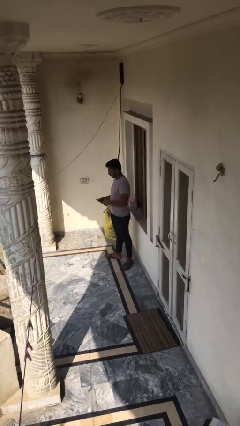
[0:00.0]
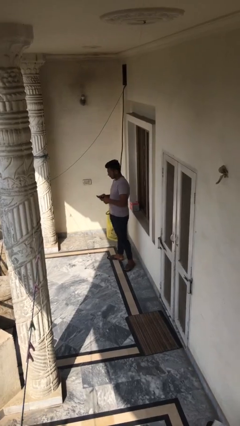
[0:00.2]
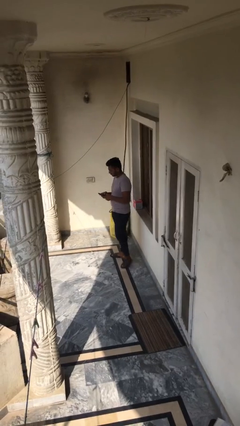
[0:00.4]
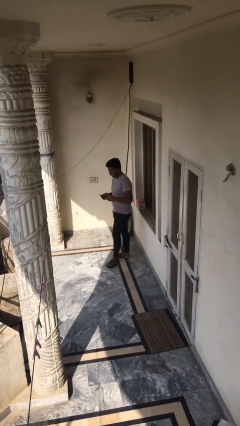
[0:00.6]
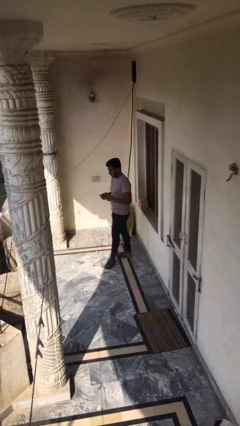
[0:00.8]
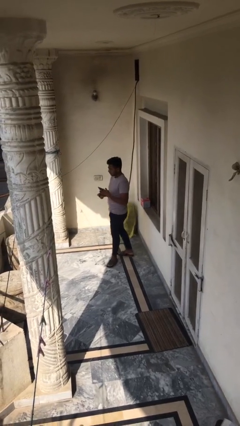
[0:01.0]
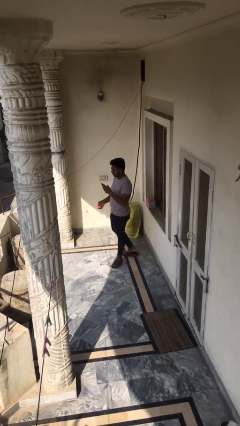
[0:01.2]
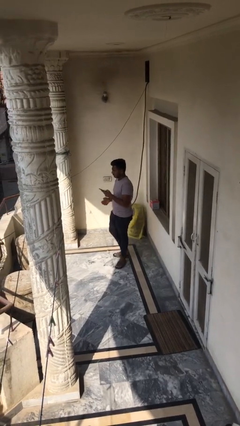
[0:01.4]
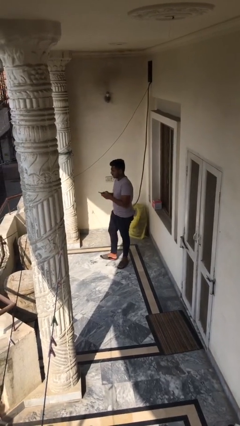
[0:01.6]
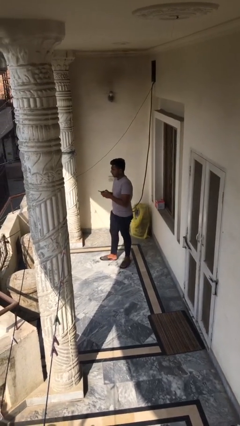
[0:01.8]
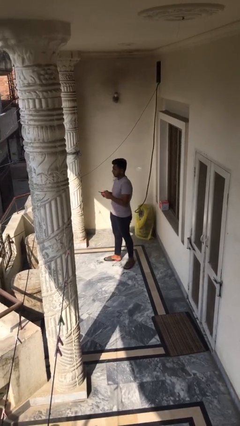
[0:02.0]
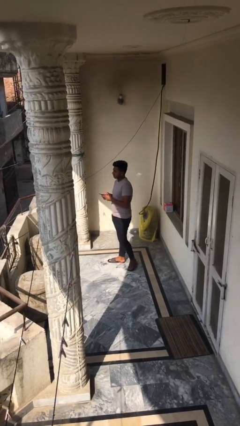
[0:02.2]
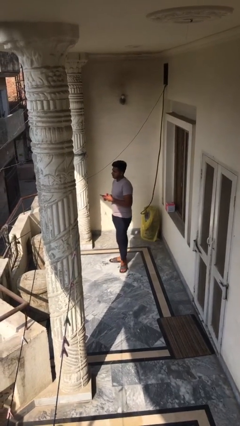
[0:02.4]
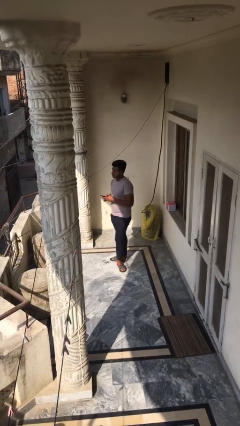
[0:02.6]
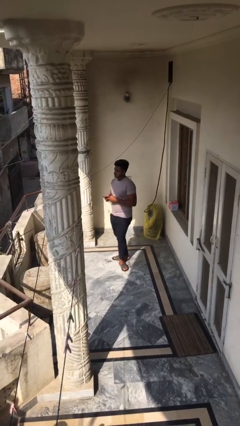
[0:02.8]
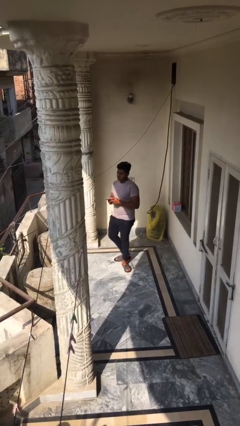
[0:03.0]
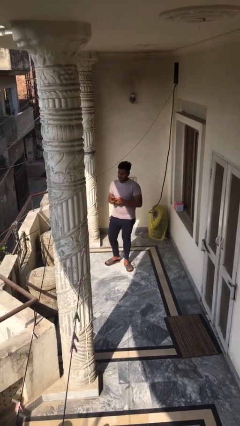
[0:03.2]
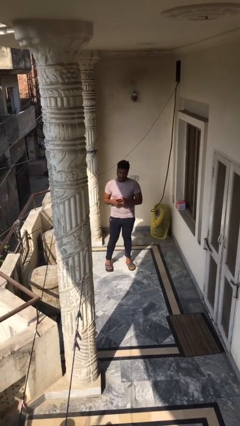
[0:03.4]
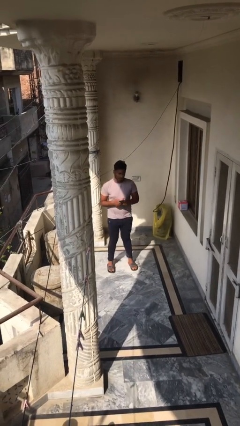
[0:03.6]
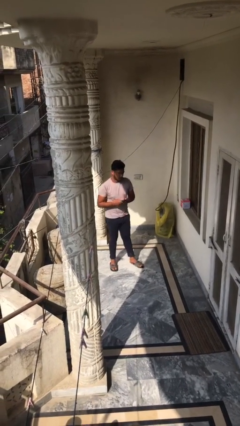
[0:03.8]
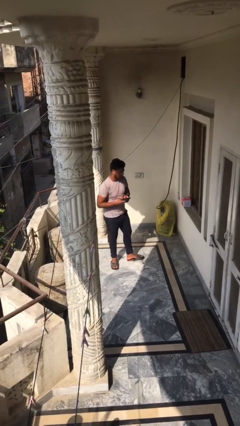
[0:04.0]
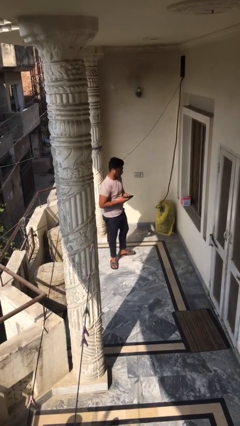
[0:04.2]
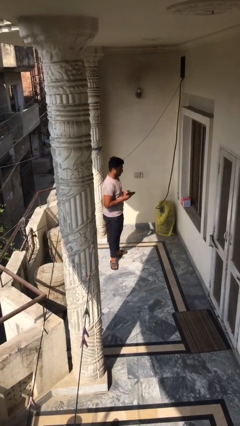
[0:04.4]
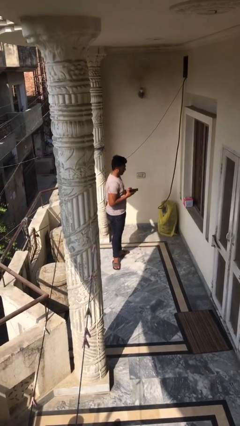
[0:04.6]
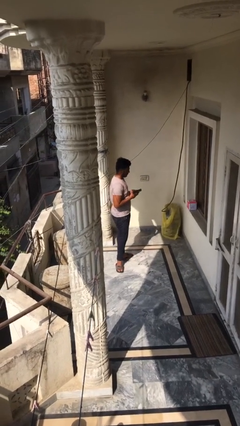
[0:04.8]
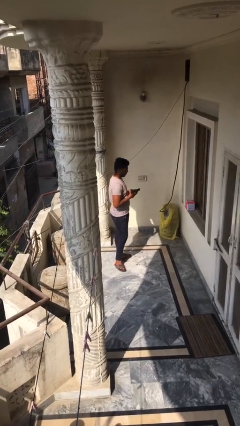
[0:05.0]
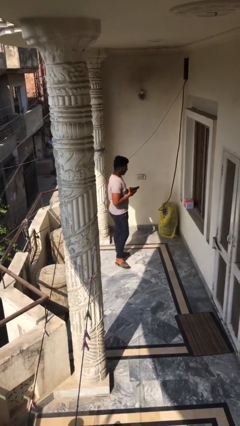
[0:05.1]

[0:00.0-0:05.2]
person texts on phone

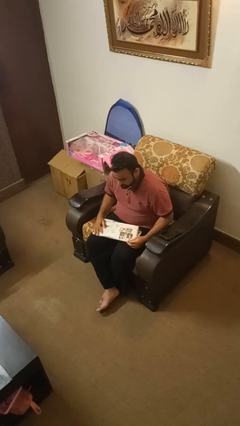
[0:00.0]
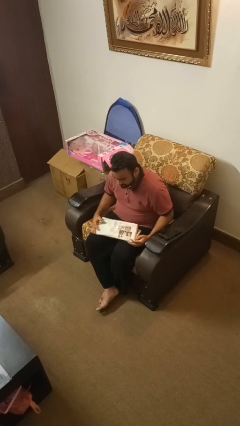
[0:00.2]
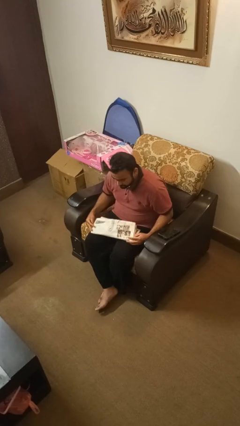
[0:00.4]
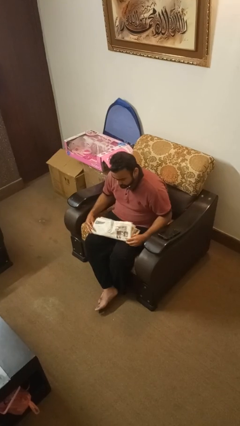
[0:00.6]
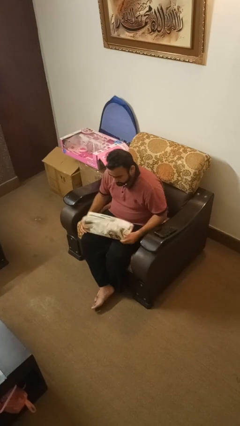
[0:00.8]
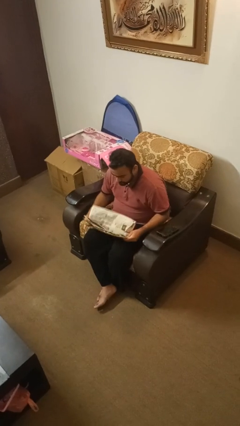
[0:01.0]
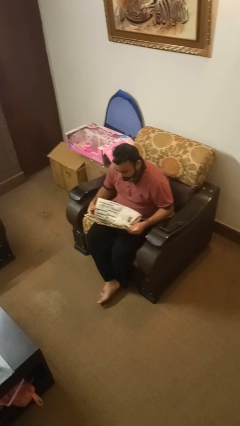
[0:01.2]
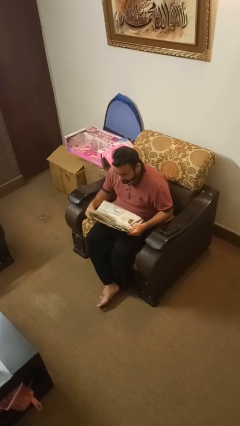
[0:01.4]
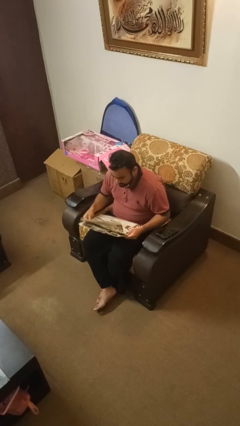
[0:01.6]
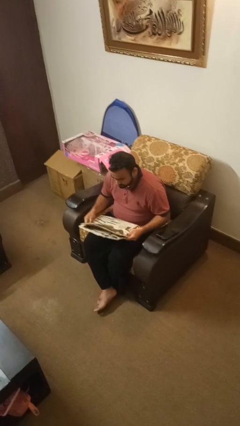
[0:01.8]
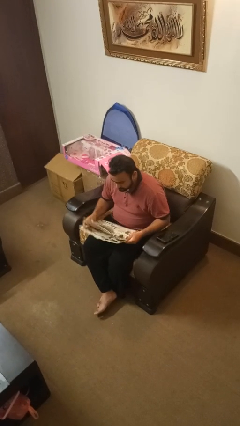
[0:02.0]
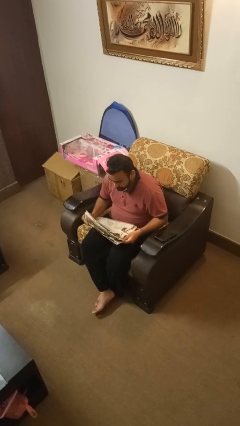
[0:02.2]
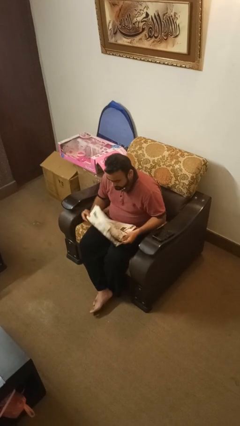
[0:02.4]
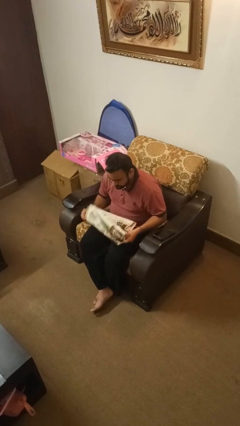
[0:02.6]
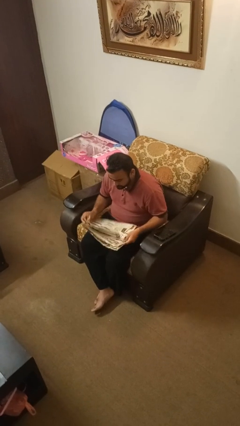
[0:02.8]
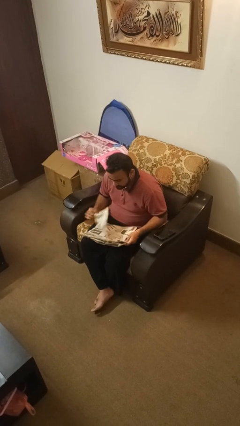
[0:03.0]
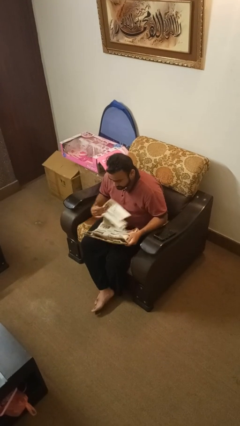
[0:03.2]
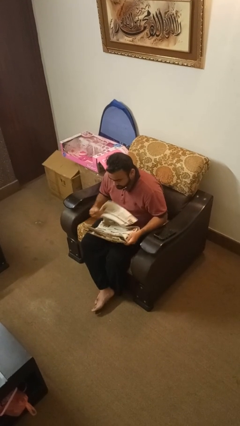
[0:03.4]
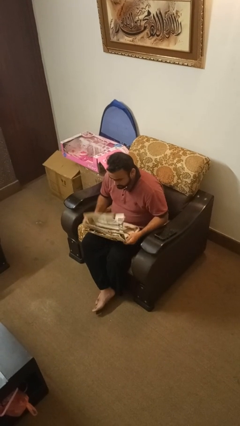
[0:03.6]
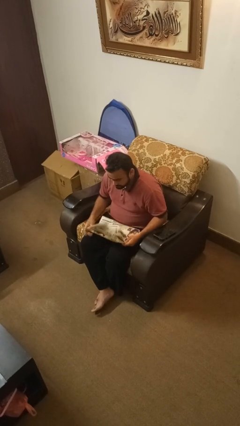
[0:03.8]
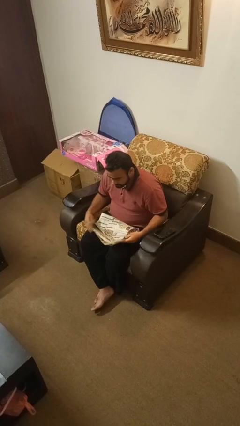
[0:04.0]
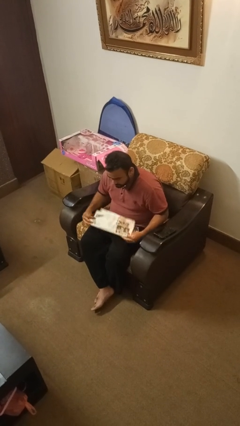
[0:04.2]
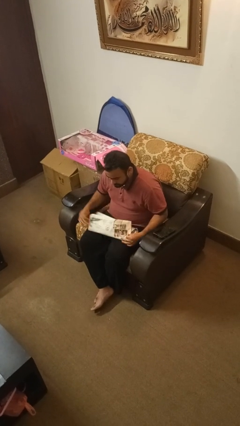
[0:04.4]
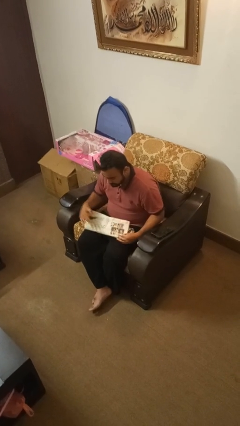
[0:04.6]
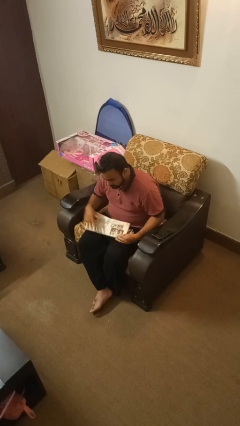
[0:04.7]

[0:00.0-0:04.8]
person reads newspaper

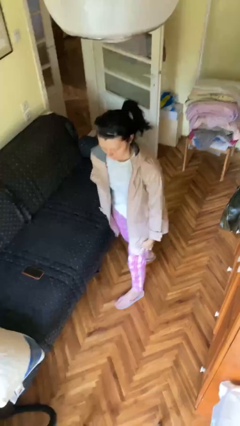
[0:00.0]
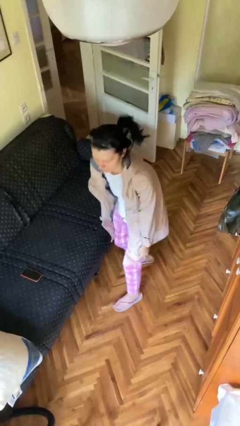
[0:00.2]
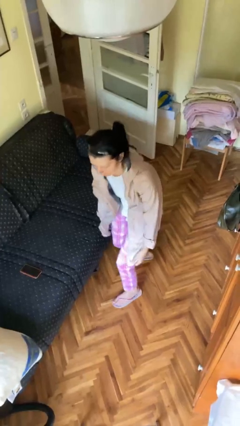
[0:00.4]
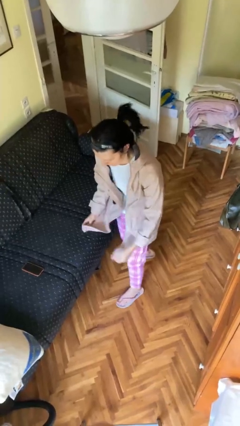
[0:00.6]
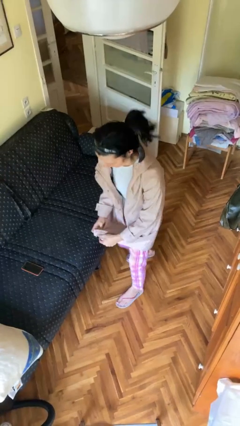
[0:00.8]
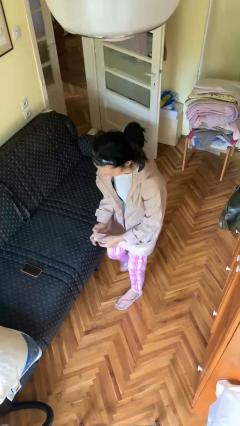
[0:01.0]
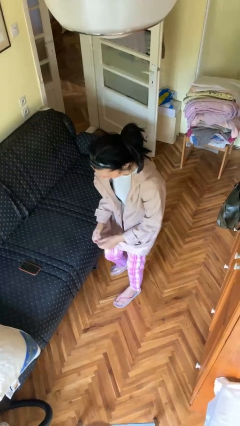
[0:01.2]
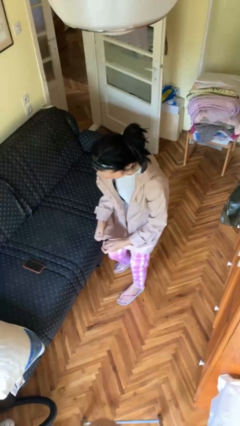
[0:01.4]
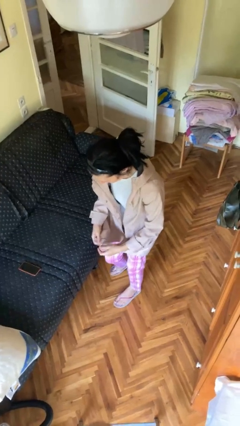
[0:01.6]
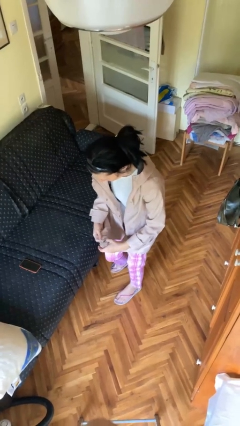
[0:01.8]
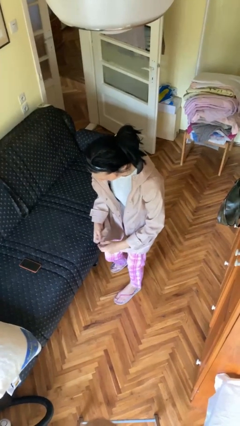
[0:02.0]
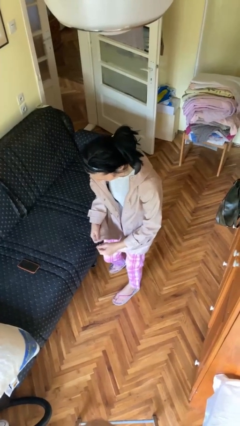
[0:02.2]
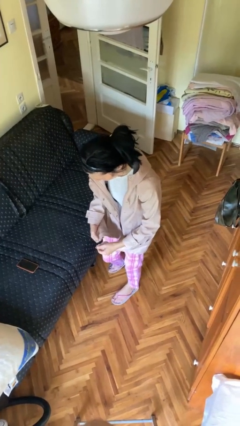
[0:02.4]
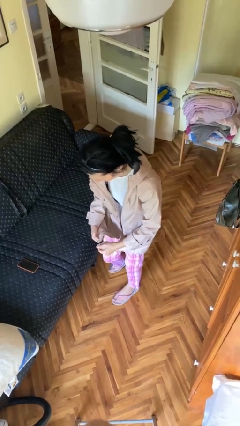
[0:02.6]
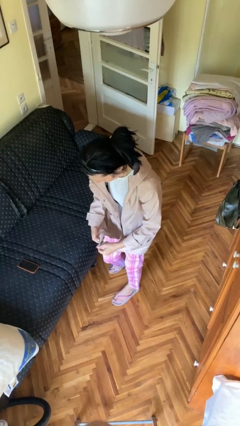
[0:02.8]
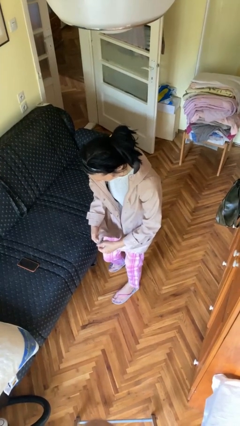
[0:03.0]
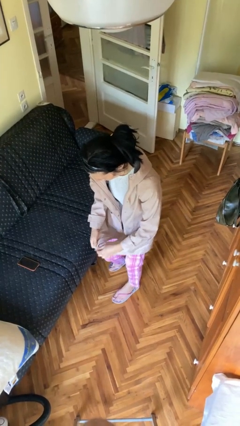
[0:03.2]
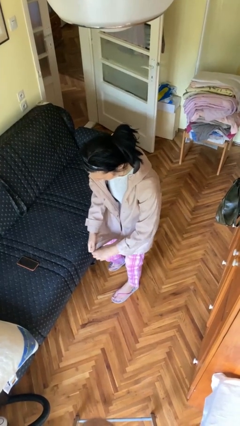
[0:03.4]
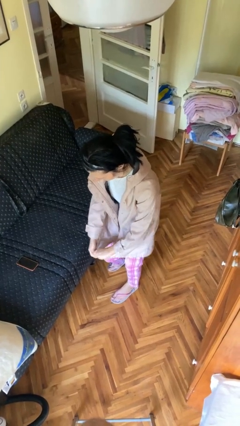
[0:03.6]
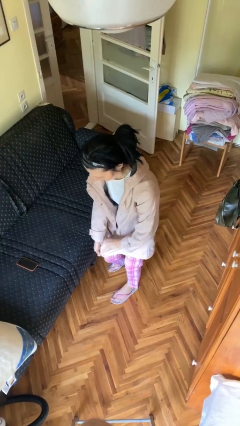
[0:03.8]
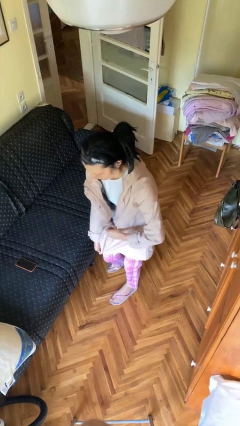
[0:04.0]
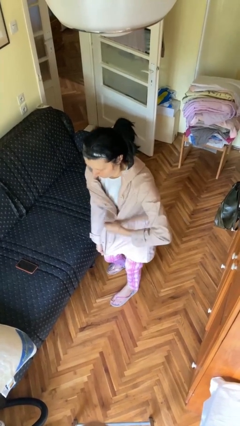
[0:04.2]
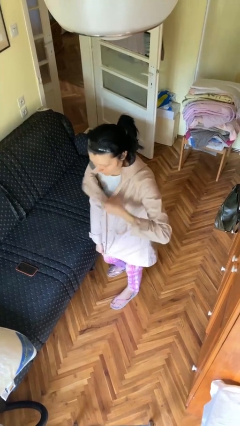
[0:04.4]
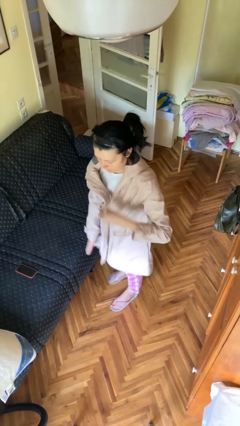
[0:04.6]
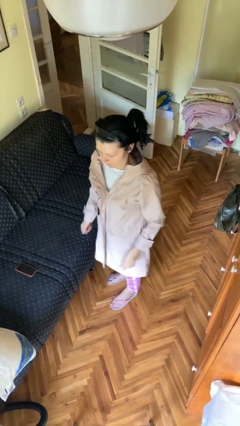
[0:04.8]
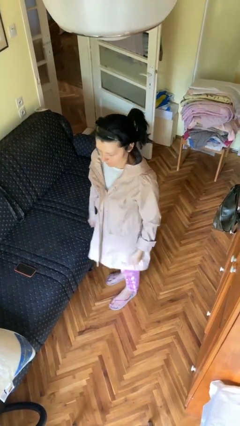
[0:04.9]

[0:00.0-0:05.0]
person zips up jacket

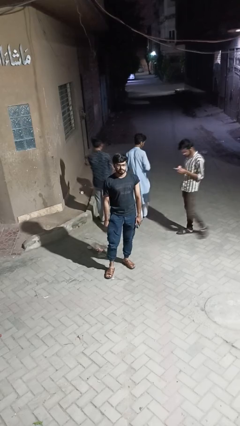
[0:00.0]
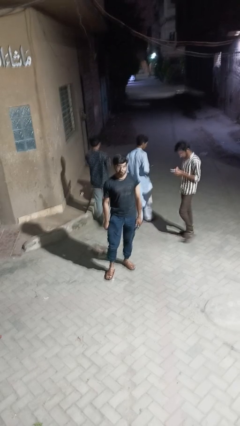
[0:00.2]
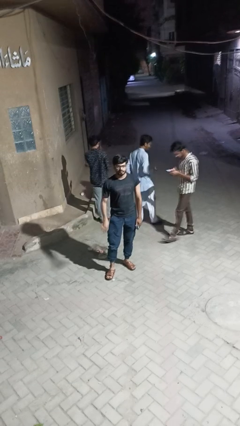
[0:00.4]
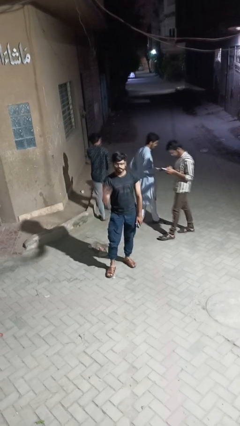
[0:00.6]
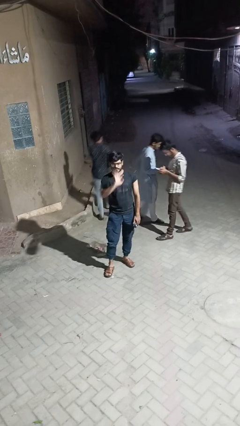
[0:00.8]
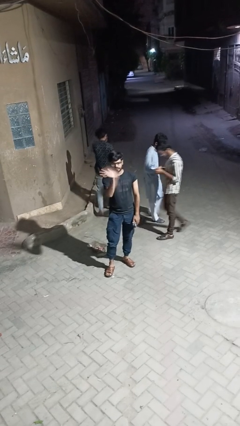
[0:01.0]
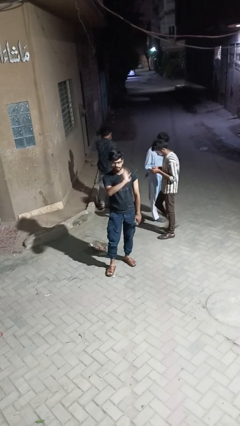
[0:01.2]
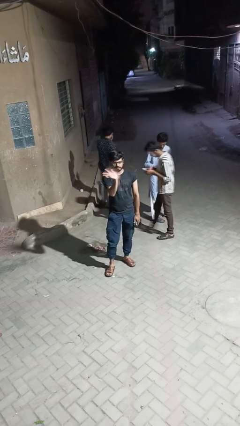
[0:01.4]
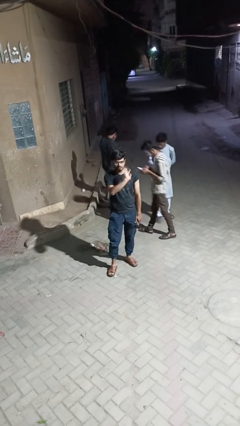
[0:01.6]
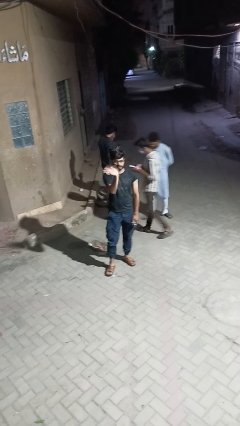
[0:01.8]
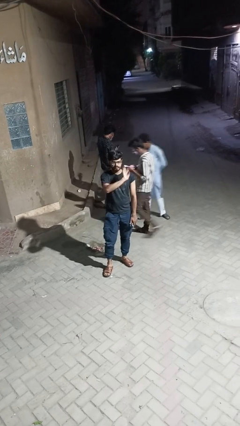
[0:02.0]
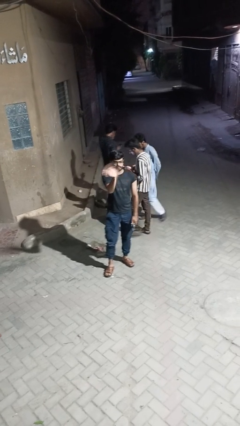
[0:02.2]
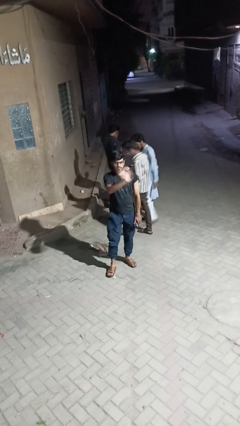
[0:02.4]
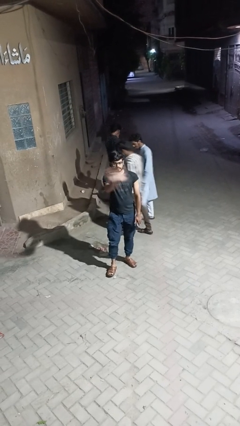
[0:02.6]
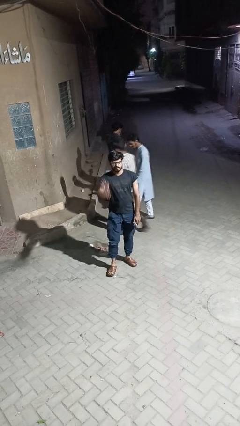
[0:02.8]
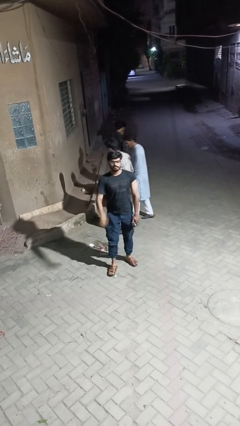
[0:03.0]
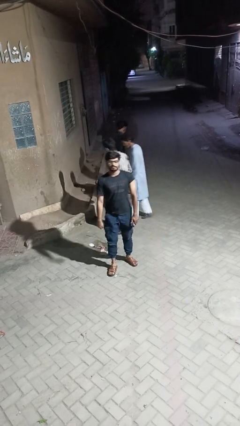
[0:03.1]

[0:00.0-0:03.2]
person waves at person
